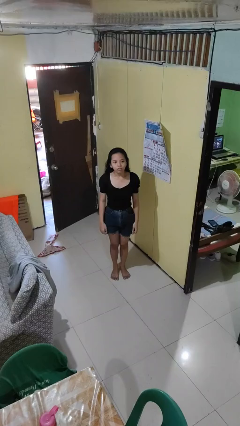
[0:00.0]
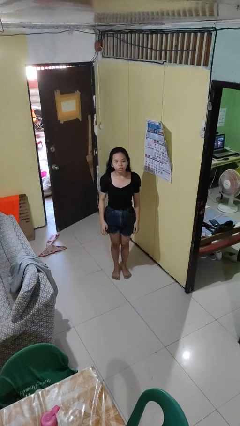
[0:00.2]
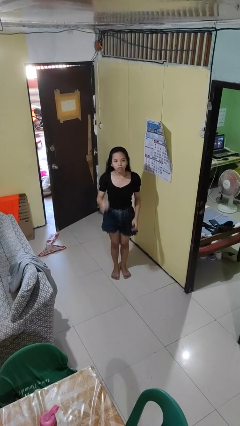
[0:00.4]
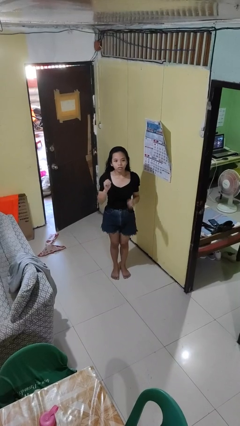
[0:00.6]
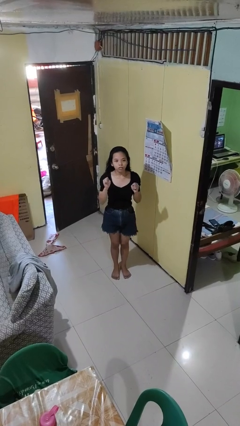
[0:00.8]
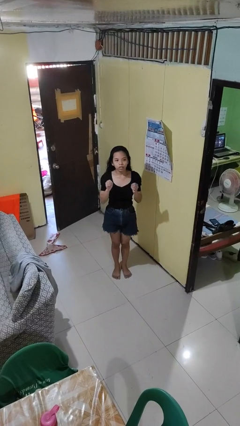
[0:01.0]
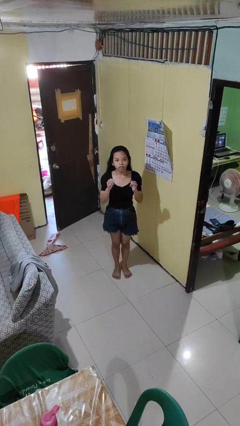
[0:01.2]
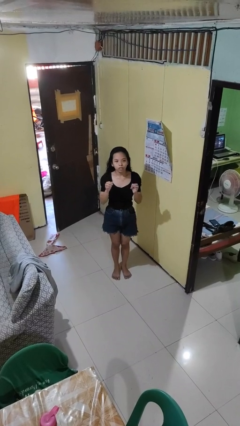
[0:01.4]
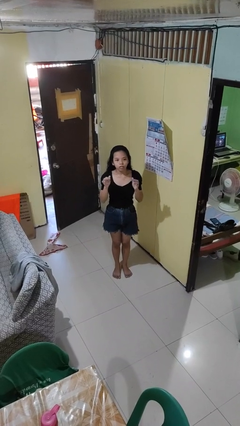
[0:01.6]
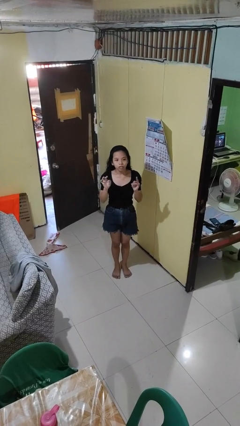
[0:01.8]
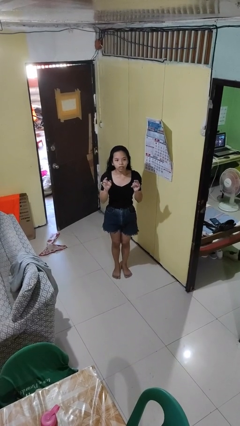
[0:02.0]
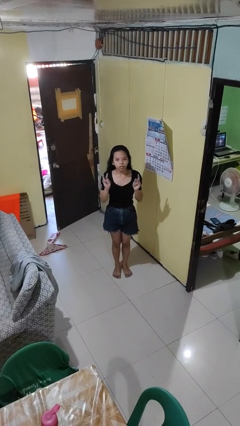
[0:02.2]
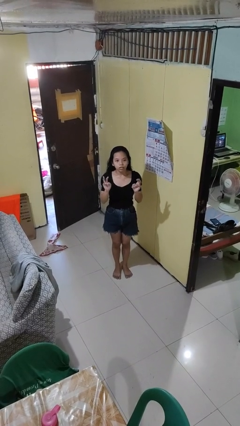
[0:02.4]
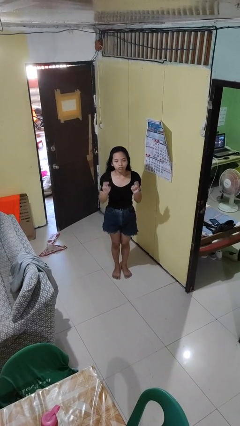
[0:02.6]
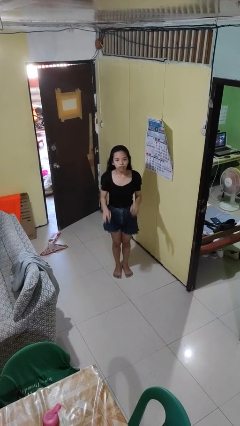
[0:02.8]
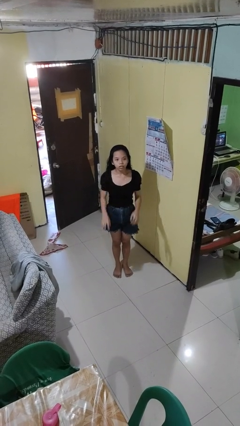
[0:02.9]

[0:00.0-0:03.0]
person cracks knuckles

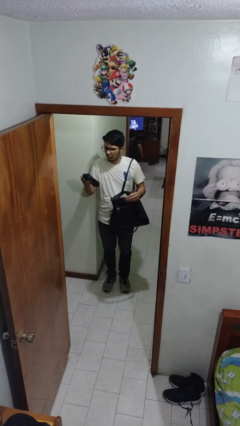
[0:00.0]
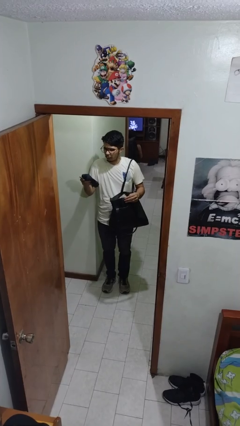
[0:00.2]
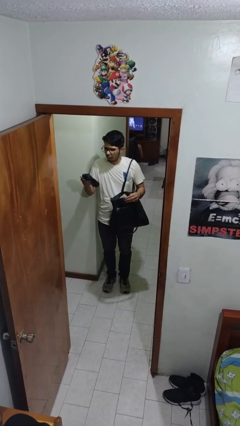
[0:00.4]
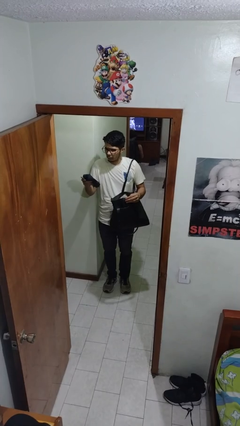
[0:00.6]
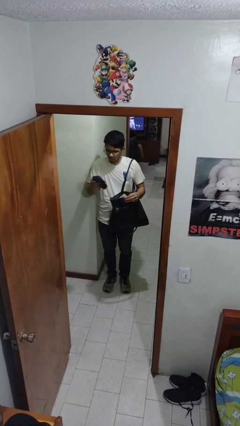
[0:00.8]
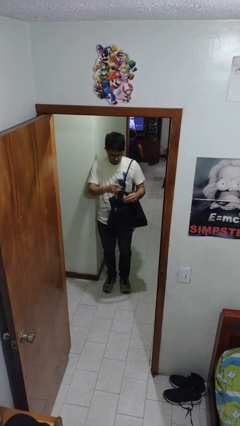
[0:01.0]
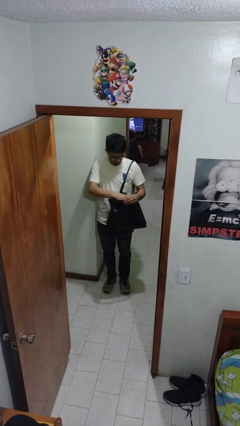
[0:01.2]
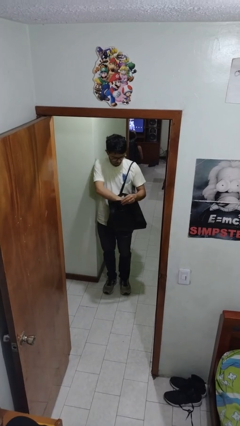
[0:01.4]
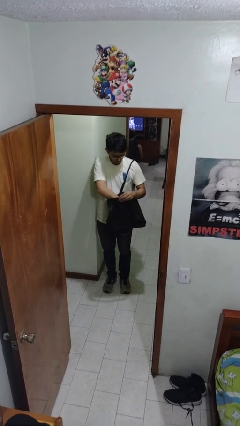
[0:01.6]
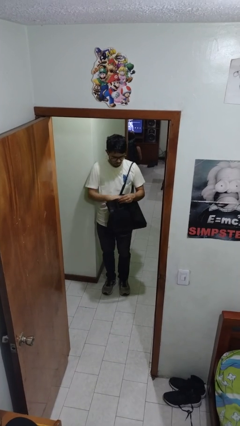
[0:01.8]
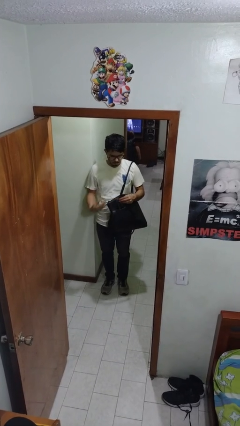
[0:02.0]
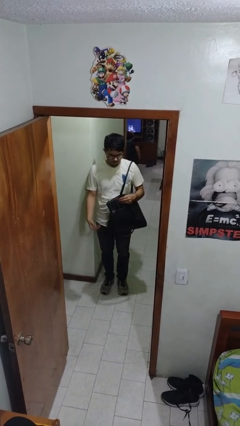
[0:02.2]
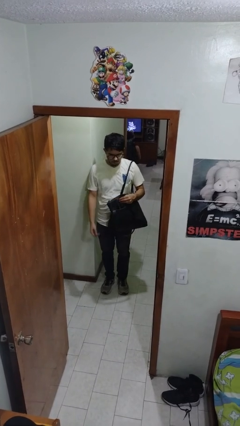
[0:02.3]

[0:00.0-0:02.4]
person puts object into purse

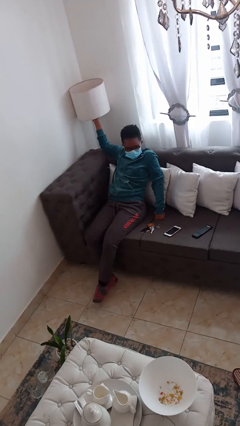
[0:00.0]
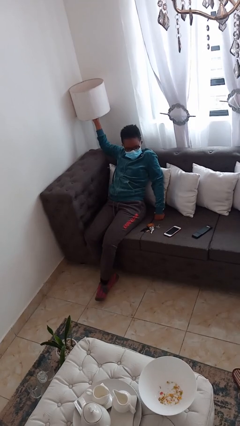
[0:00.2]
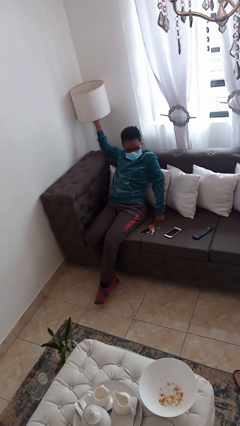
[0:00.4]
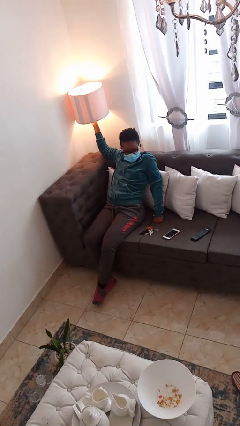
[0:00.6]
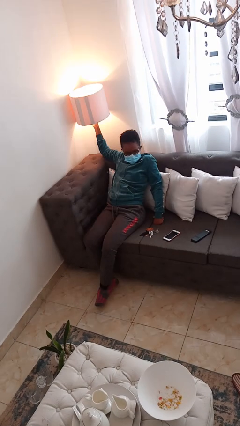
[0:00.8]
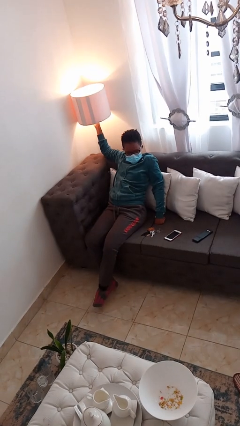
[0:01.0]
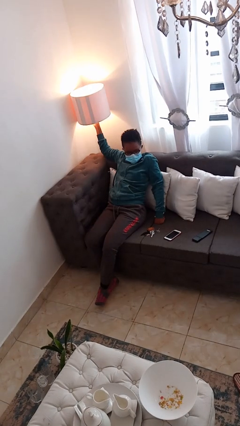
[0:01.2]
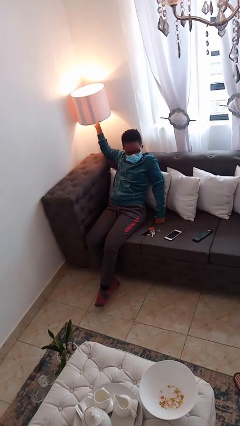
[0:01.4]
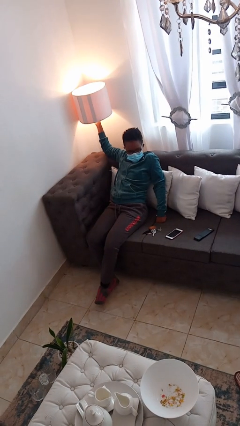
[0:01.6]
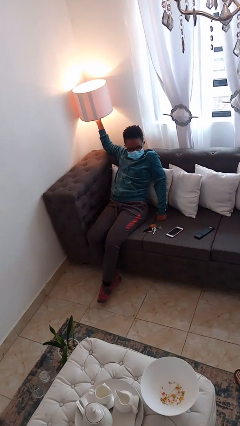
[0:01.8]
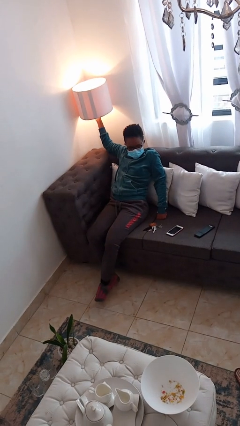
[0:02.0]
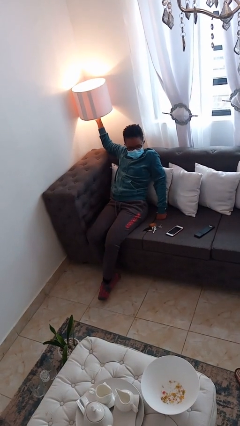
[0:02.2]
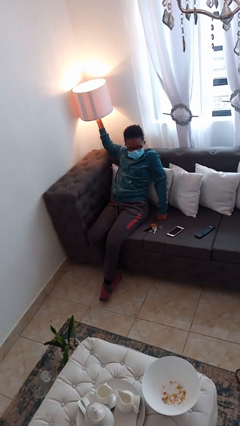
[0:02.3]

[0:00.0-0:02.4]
person turns on lamp

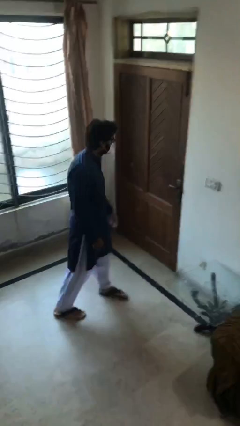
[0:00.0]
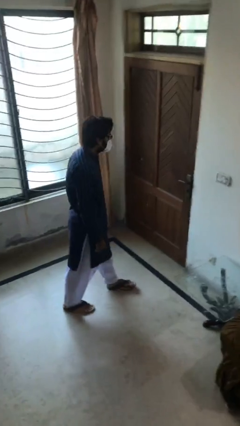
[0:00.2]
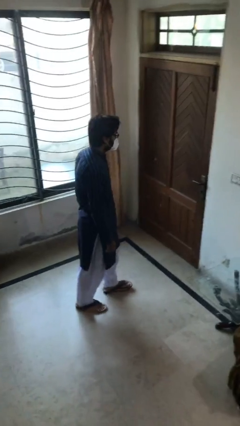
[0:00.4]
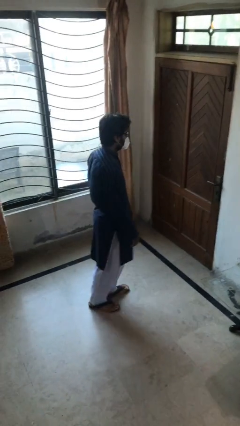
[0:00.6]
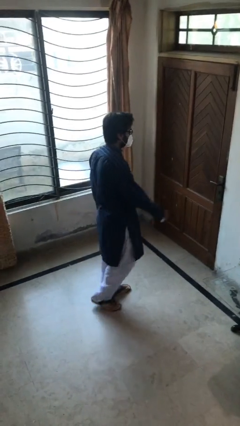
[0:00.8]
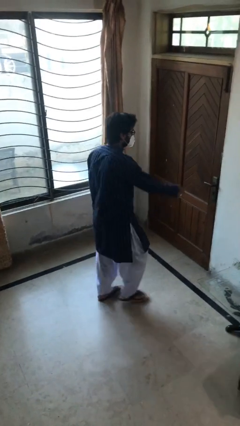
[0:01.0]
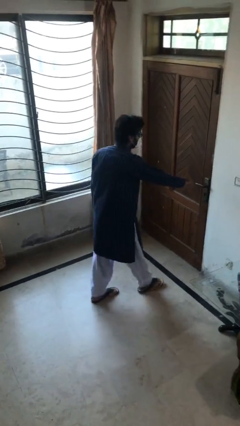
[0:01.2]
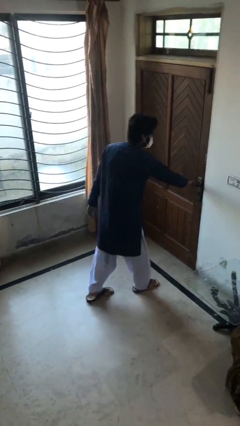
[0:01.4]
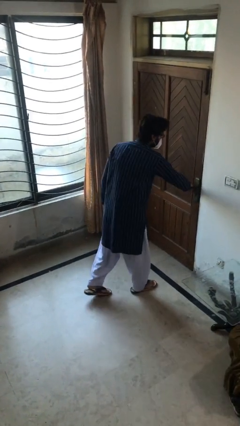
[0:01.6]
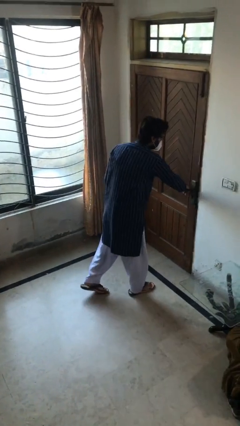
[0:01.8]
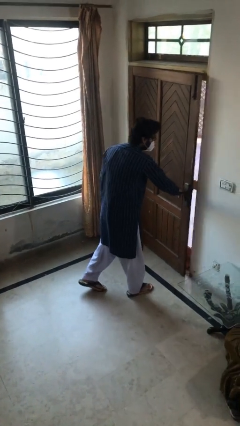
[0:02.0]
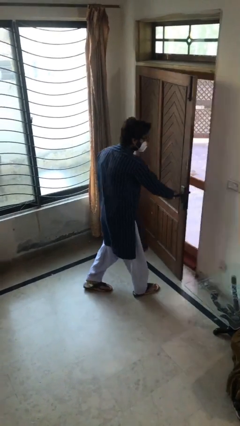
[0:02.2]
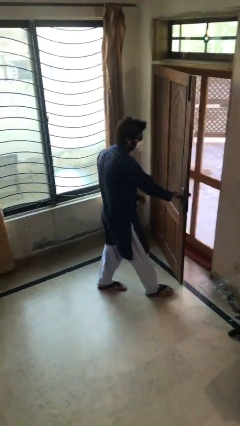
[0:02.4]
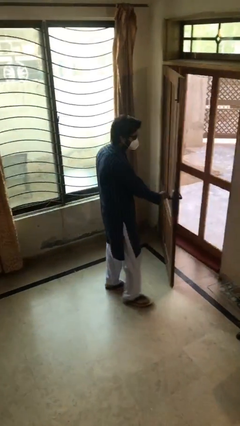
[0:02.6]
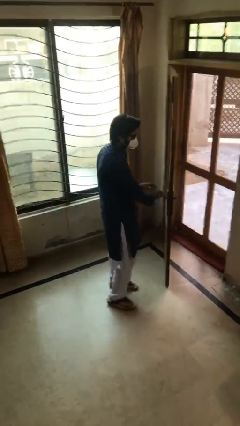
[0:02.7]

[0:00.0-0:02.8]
person opens facility door

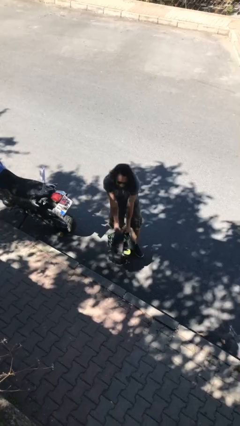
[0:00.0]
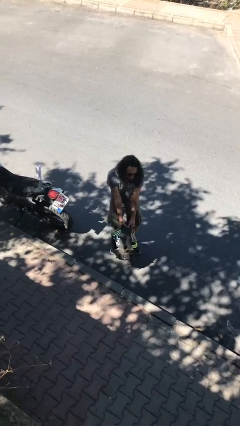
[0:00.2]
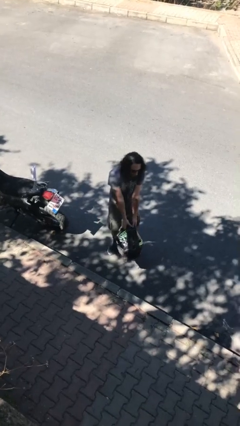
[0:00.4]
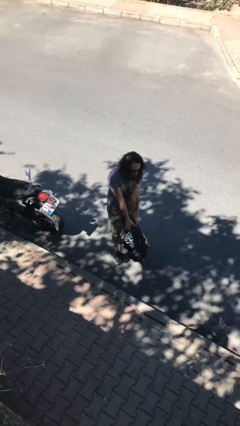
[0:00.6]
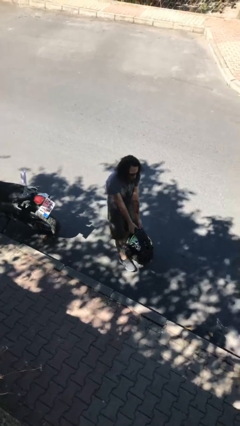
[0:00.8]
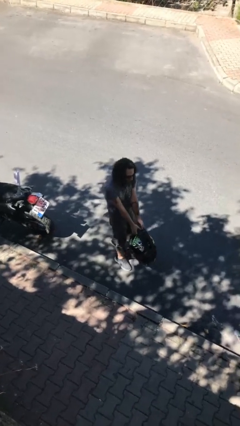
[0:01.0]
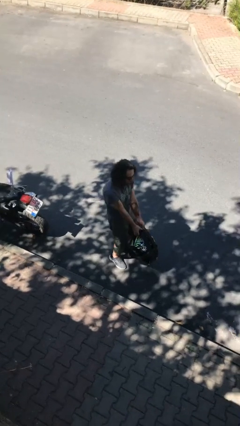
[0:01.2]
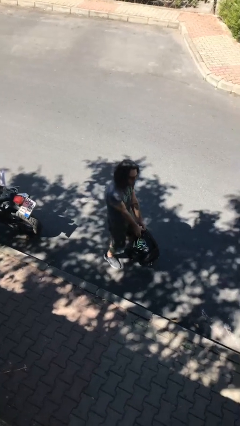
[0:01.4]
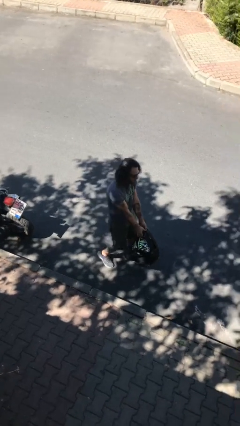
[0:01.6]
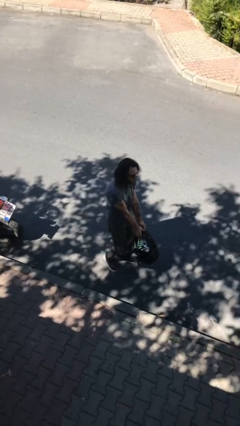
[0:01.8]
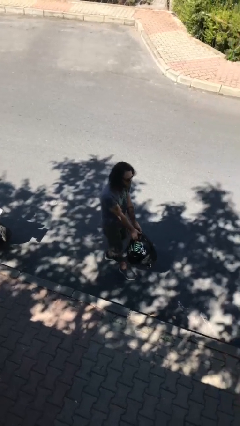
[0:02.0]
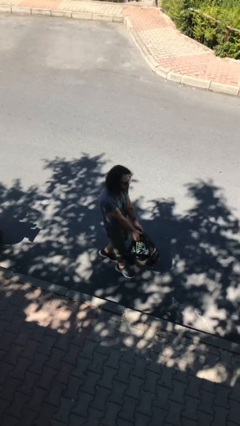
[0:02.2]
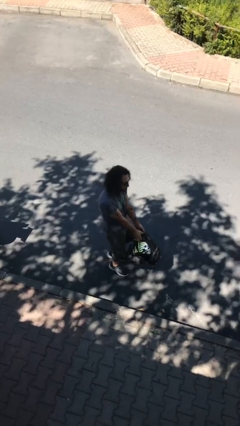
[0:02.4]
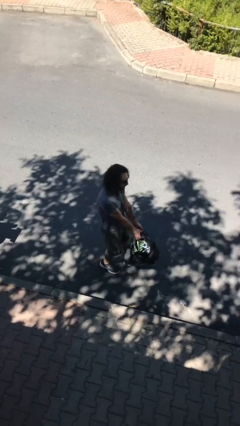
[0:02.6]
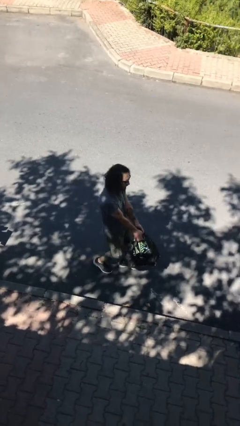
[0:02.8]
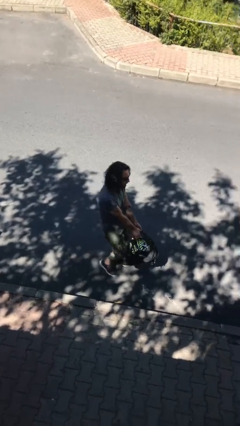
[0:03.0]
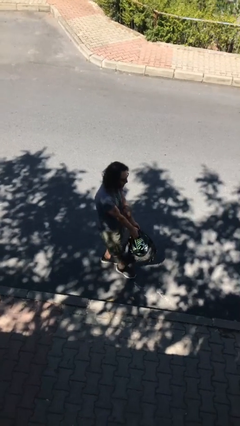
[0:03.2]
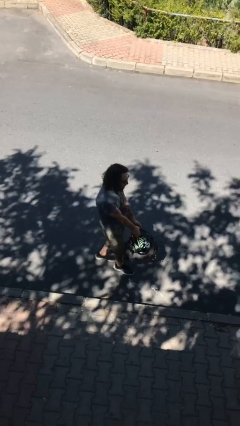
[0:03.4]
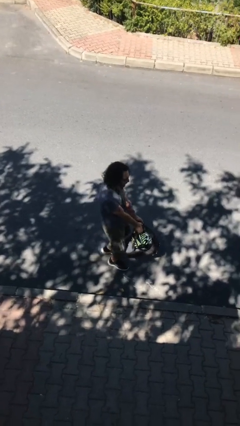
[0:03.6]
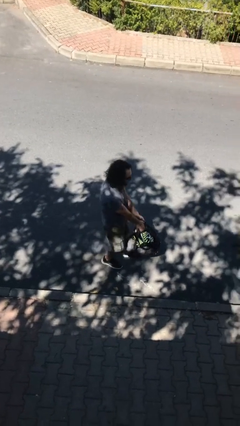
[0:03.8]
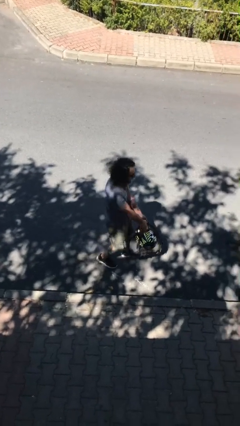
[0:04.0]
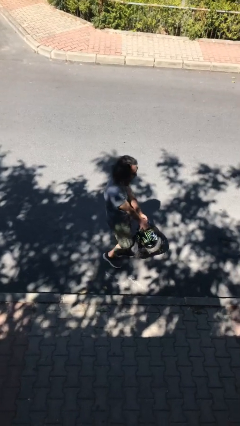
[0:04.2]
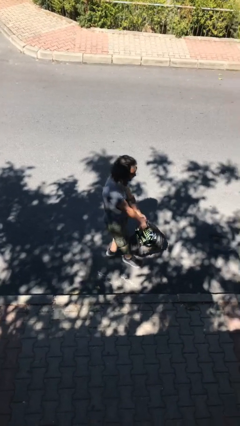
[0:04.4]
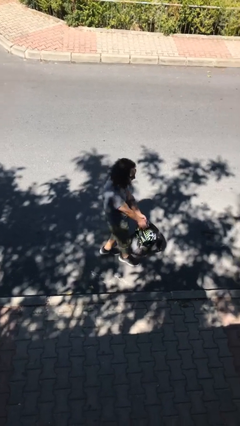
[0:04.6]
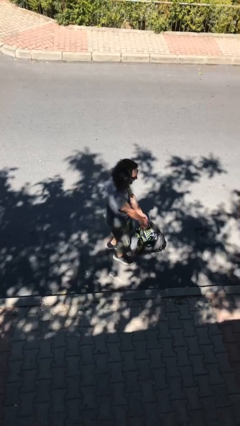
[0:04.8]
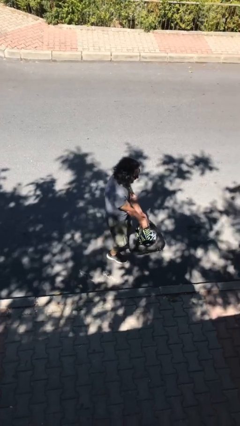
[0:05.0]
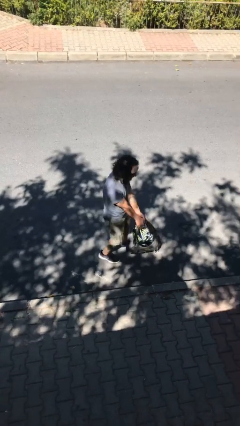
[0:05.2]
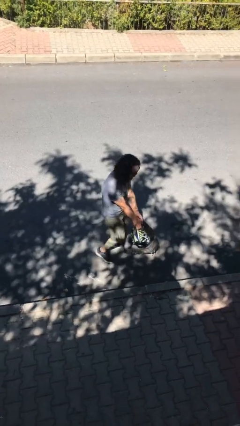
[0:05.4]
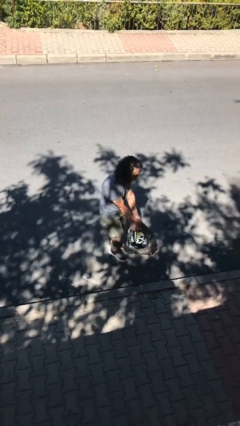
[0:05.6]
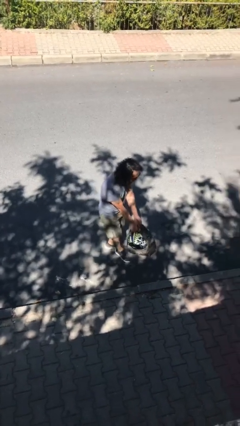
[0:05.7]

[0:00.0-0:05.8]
person carries heavy object

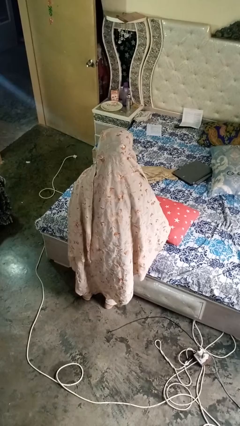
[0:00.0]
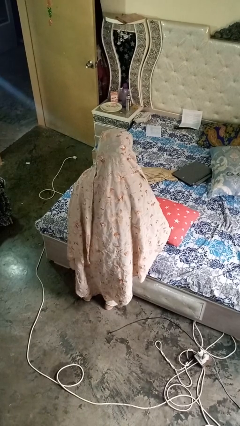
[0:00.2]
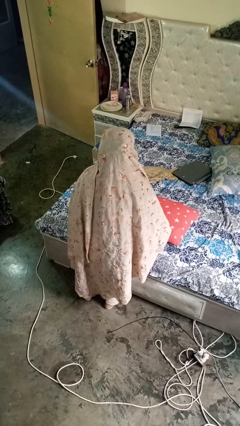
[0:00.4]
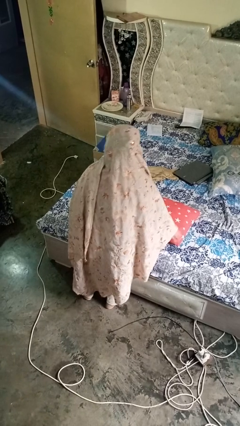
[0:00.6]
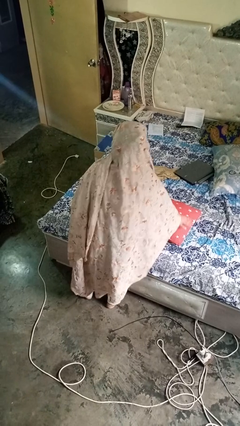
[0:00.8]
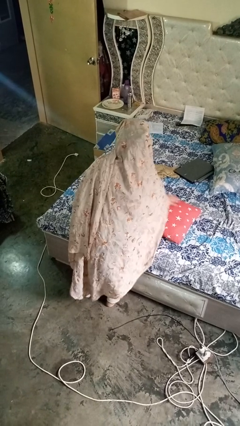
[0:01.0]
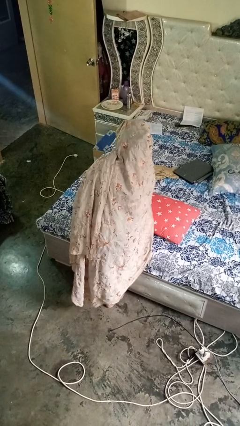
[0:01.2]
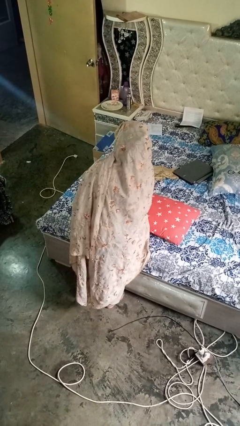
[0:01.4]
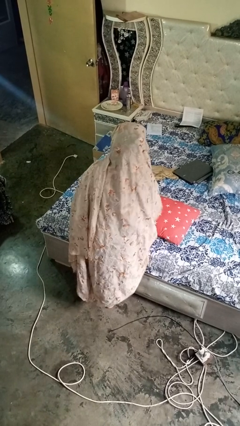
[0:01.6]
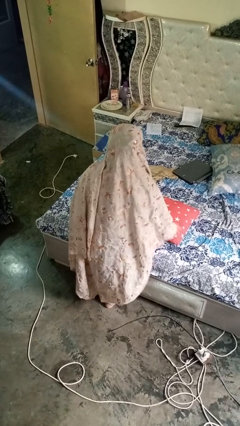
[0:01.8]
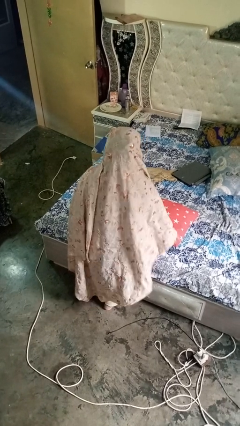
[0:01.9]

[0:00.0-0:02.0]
person waves hand over object
